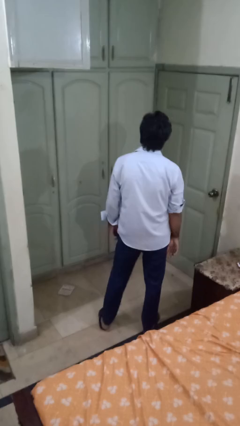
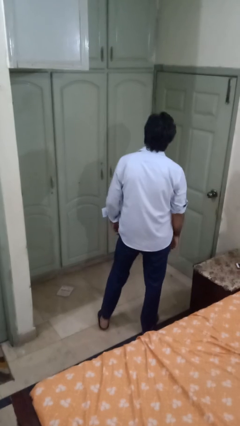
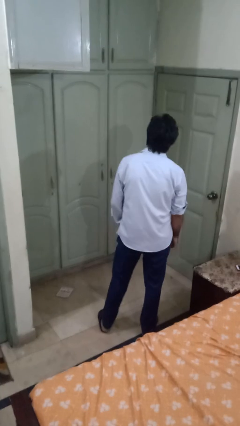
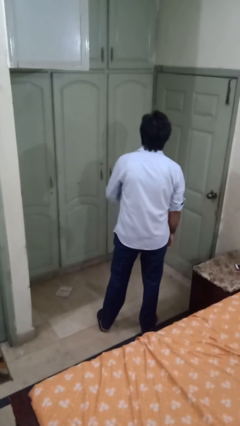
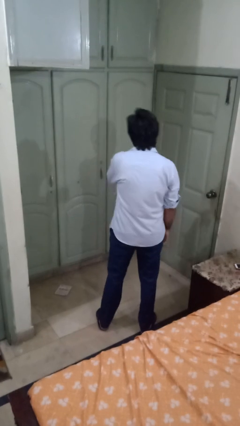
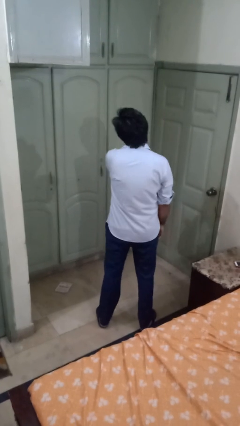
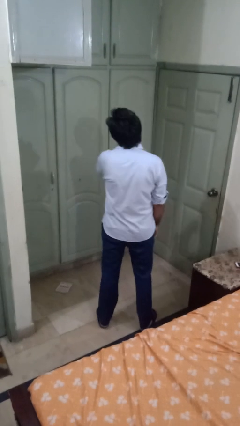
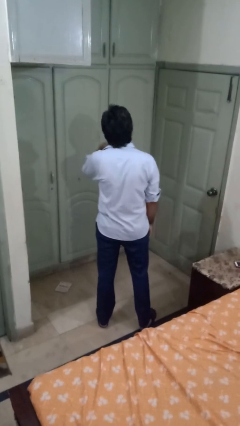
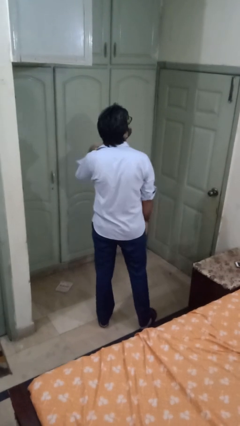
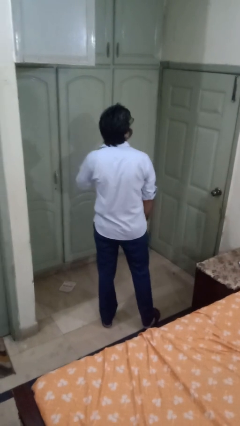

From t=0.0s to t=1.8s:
person gestures cut

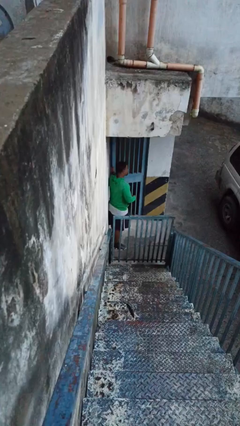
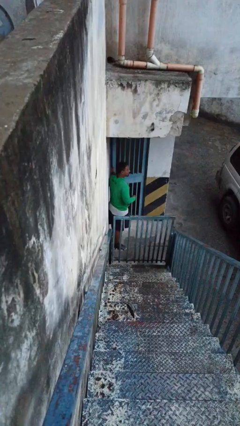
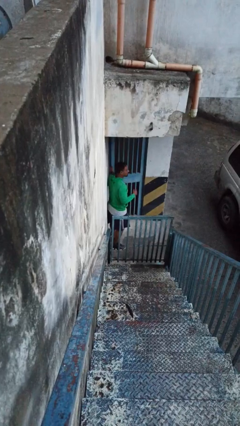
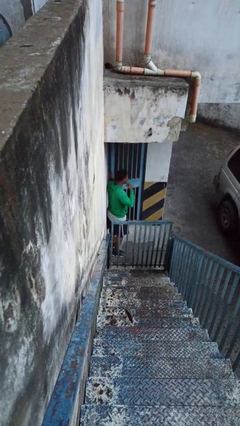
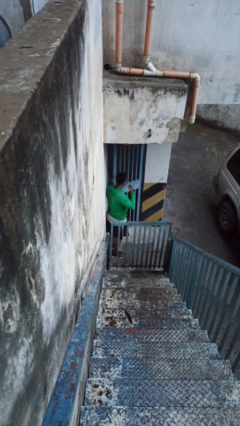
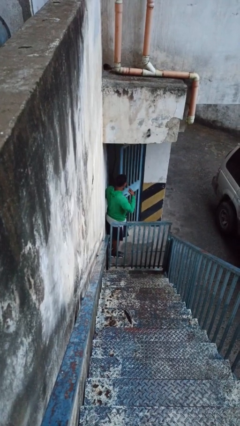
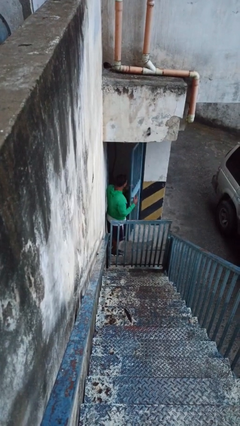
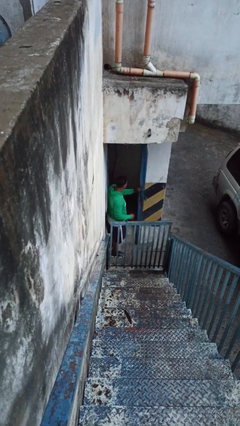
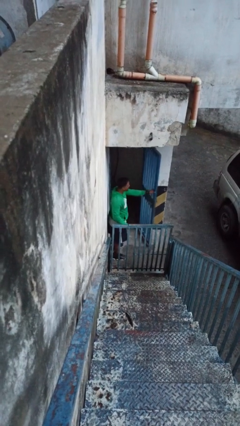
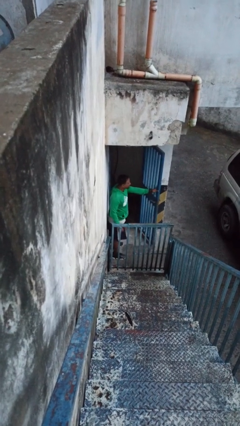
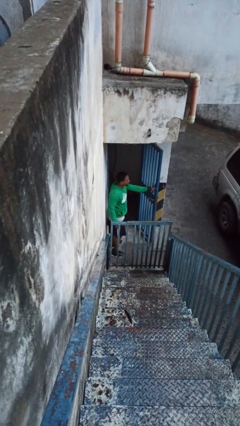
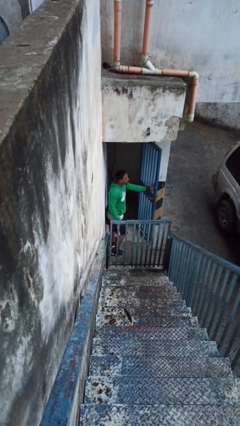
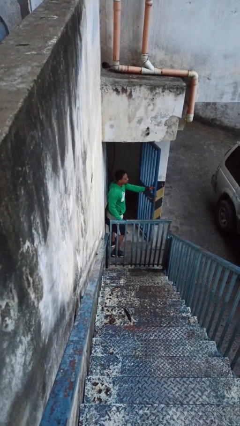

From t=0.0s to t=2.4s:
person opens facility door

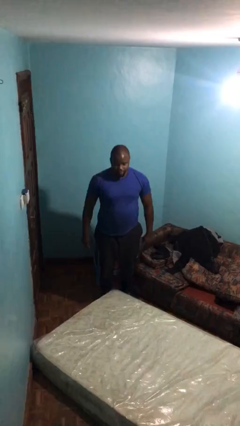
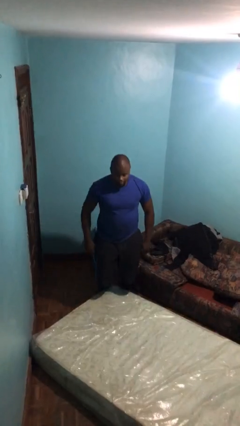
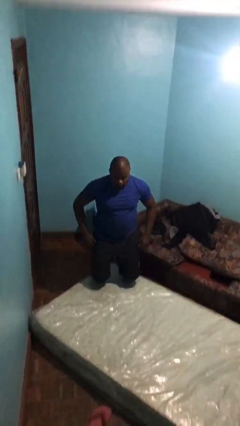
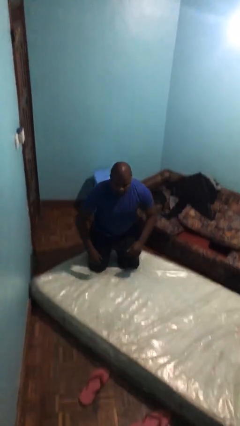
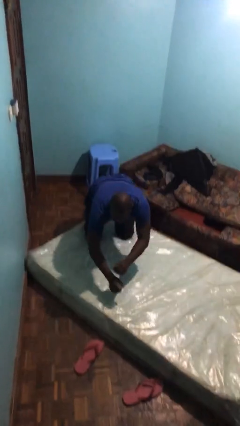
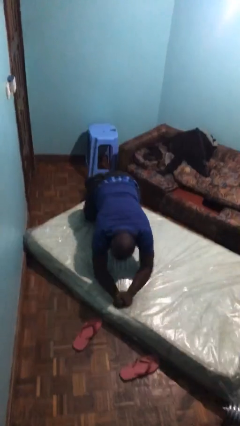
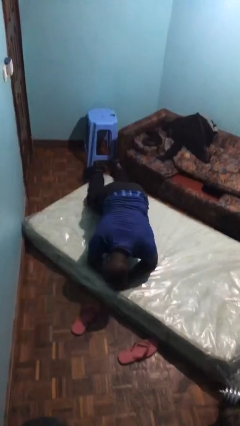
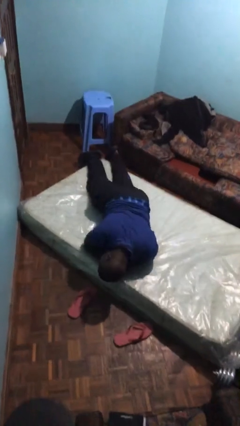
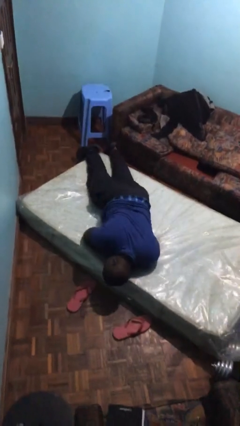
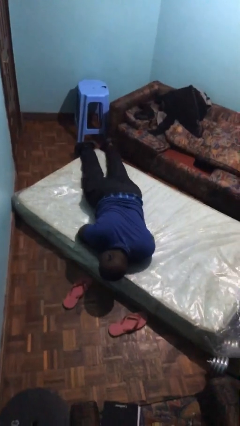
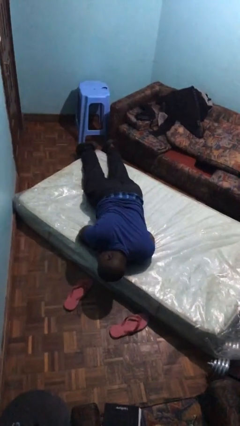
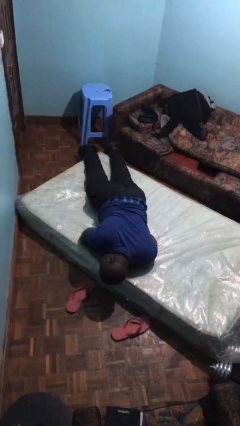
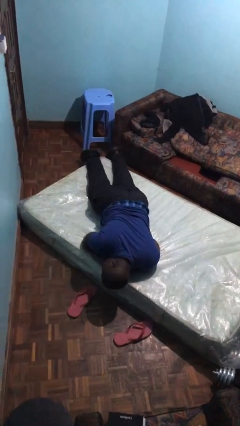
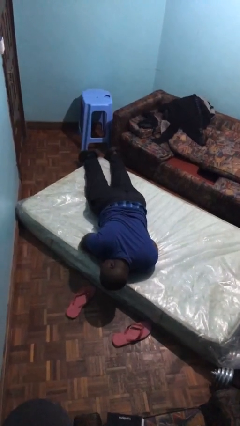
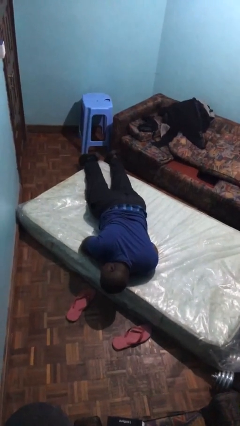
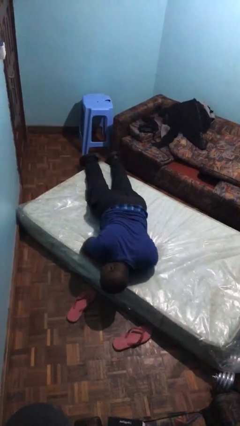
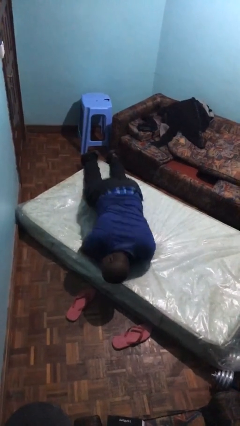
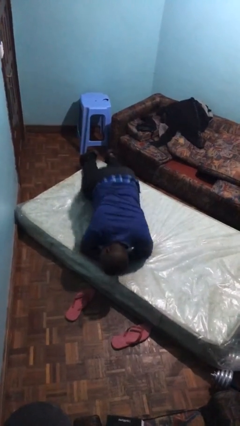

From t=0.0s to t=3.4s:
person lies down on bed

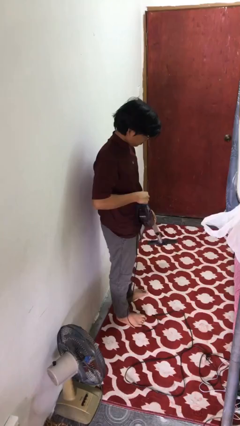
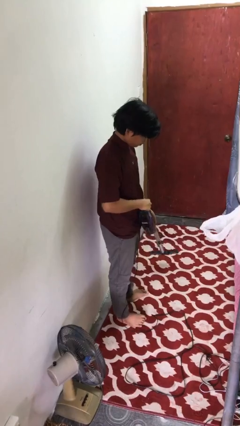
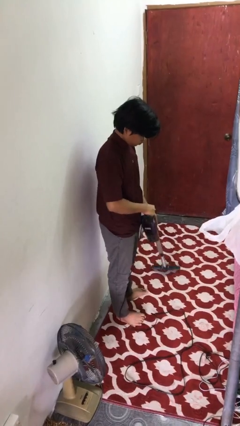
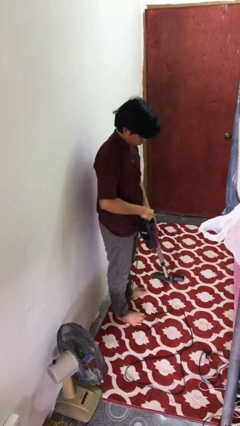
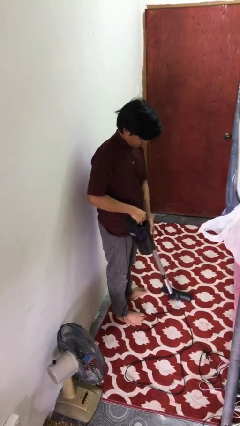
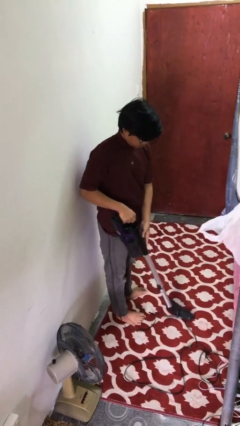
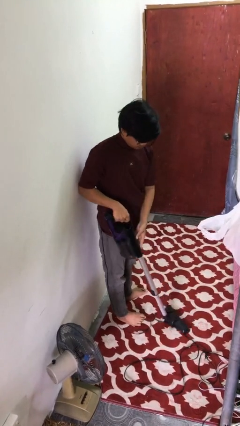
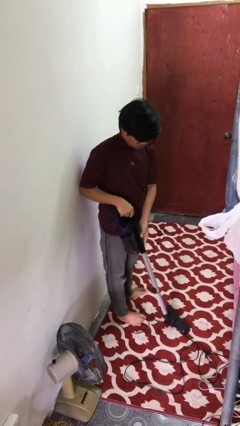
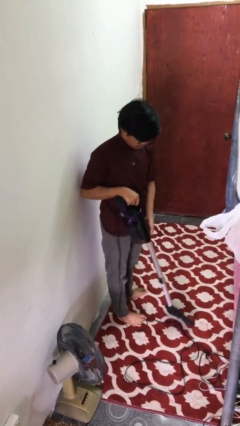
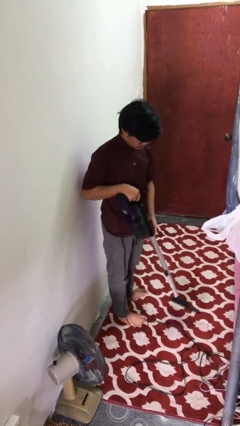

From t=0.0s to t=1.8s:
person vacuums carpet

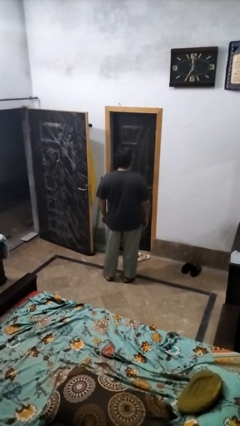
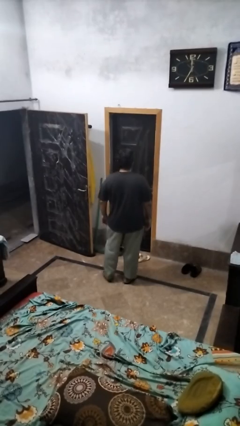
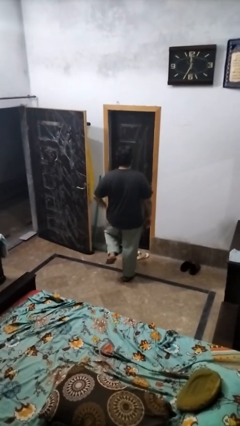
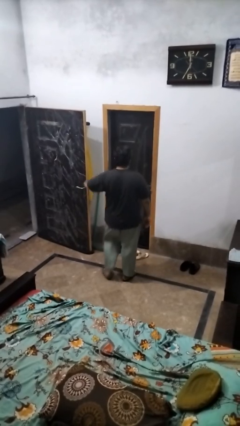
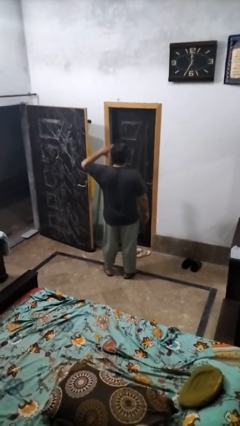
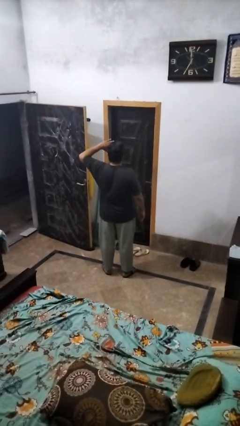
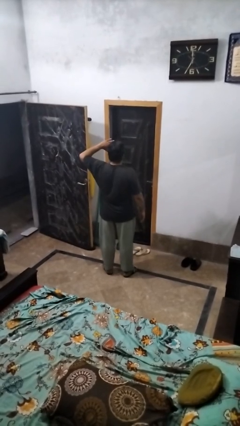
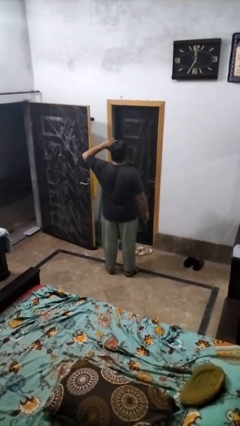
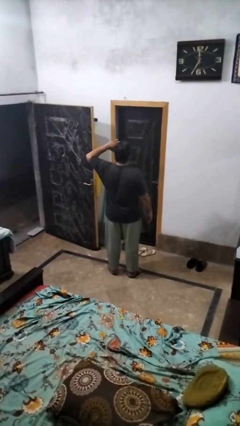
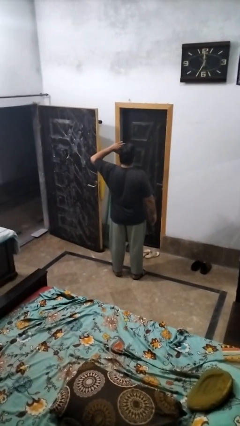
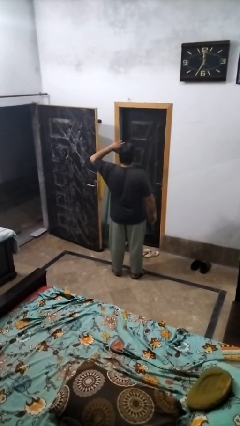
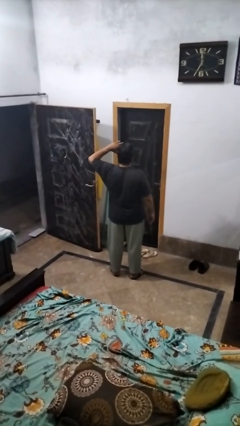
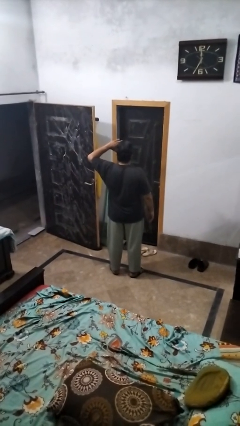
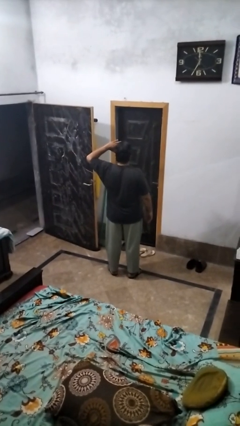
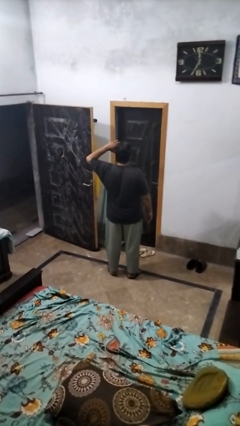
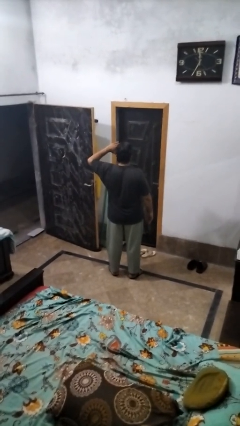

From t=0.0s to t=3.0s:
person salutes

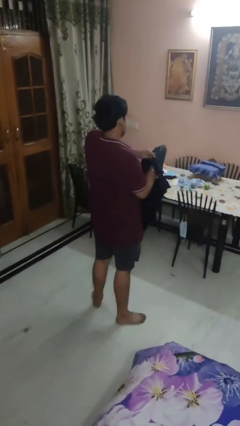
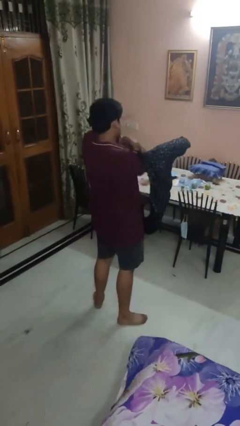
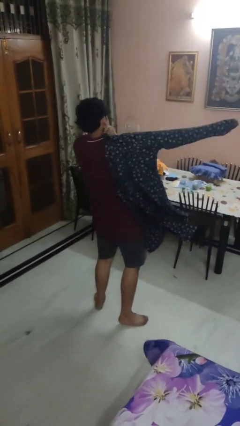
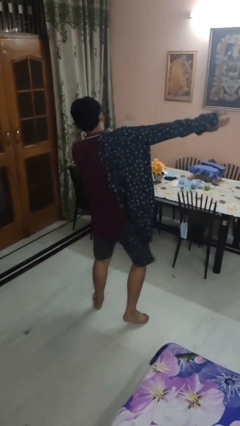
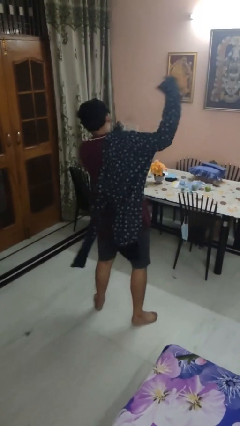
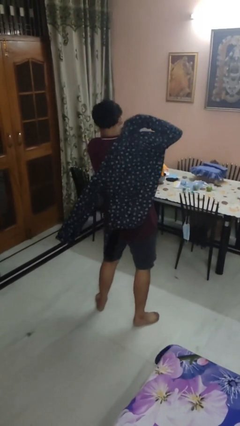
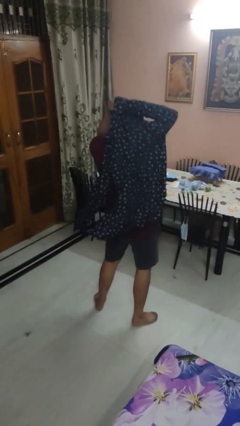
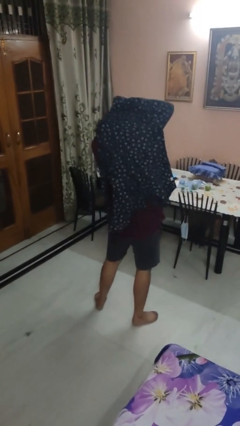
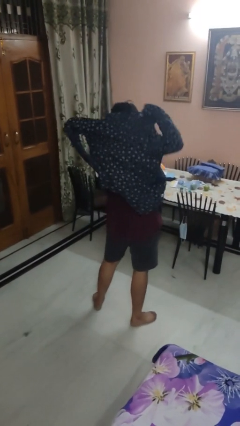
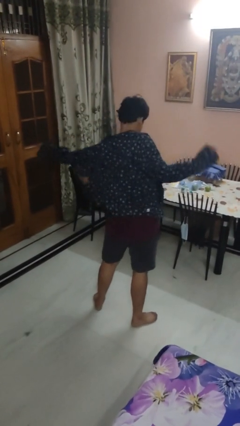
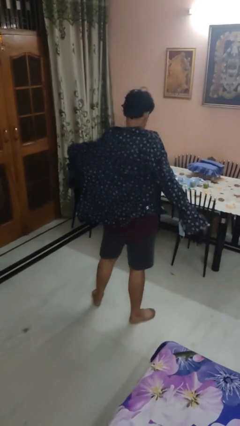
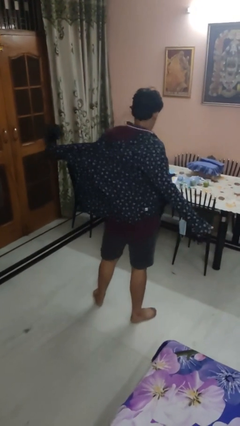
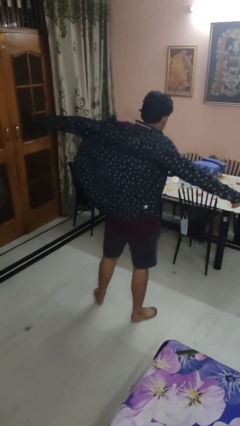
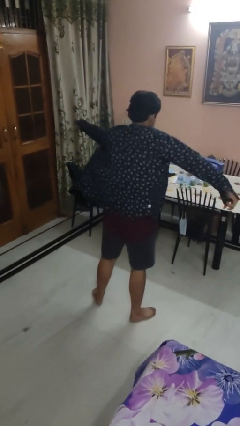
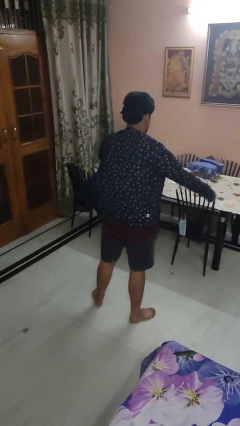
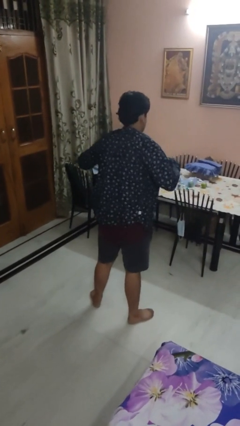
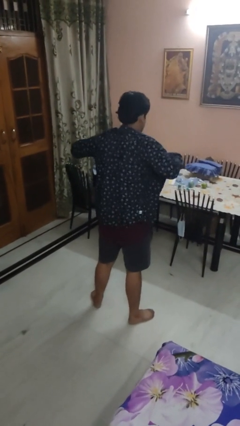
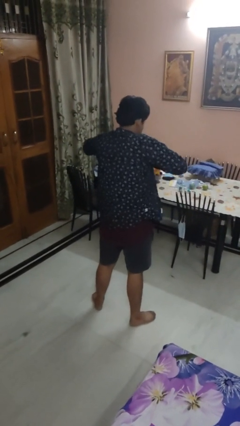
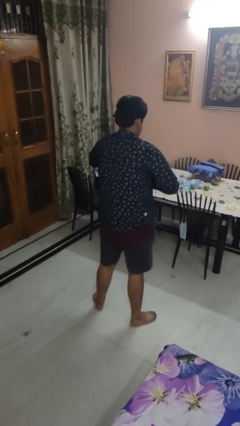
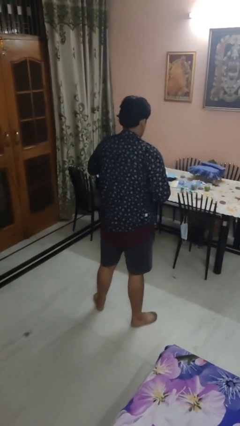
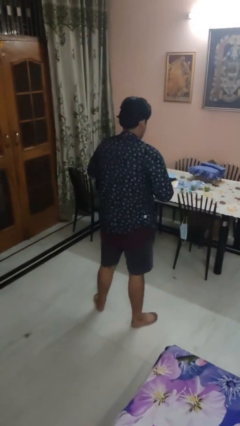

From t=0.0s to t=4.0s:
person puts on shirt

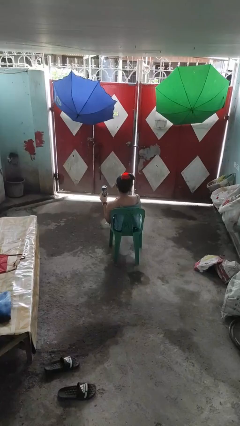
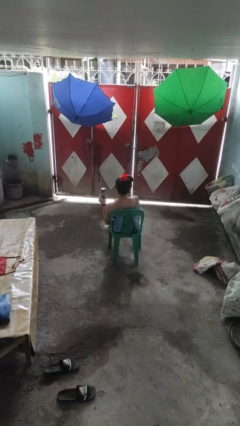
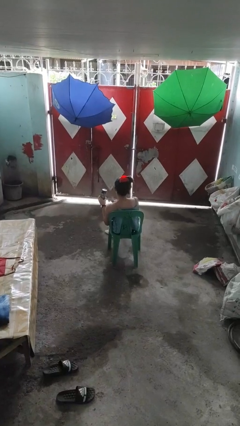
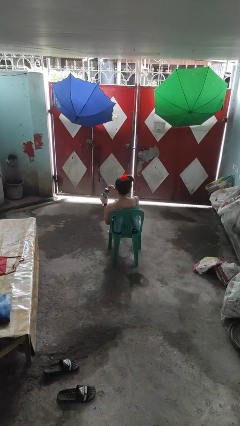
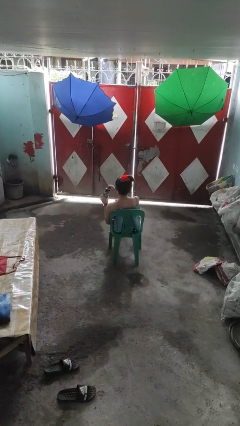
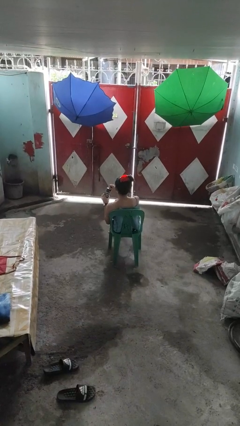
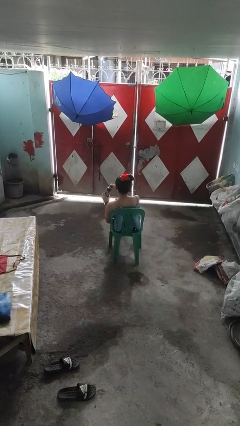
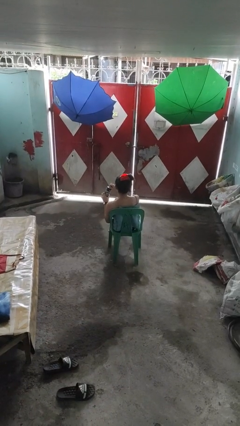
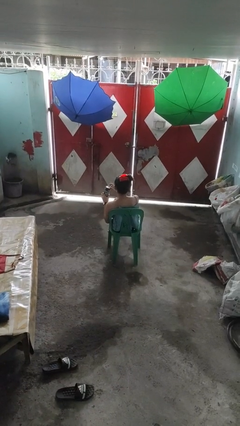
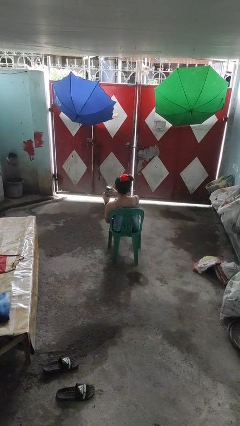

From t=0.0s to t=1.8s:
person opens beverage can
